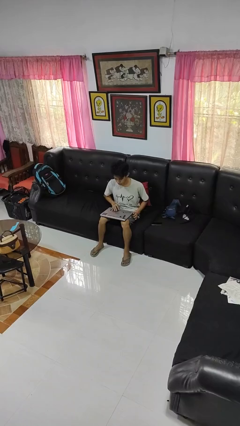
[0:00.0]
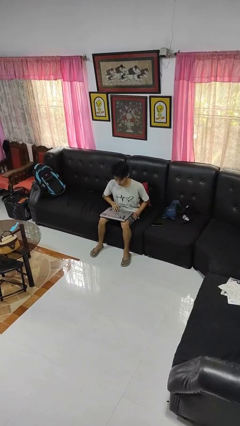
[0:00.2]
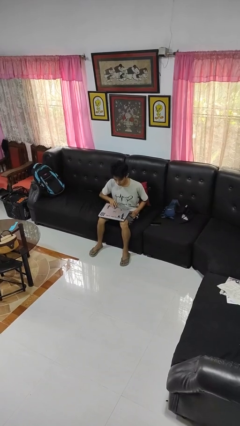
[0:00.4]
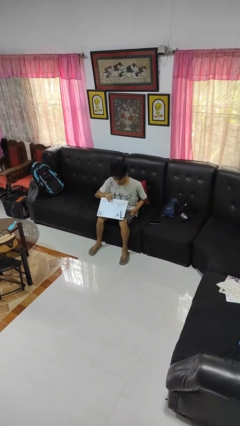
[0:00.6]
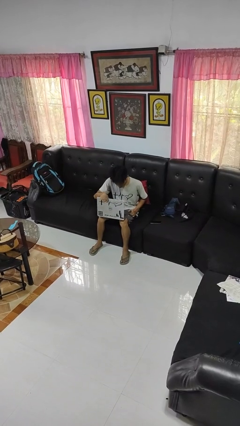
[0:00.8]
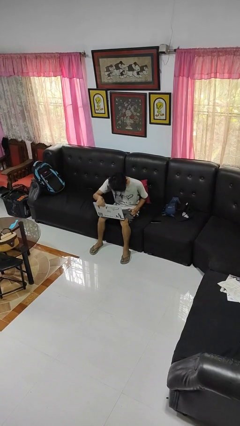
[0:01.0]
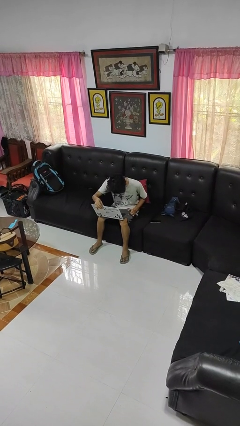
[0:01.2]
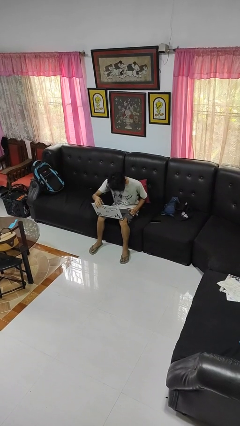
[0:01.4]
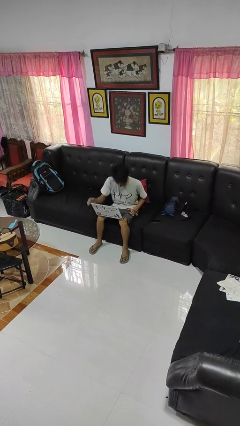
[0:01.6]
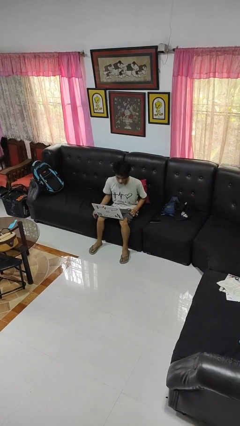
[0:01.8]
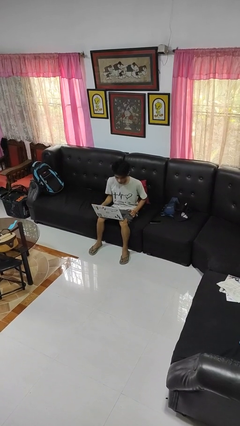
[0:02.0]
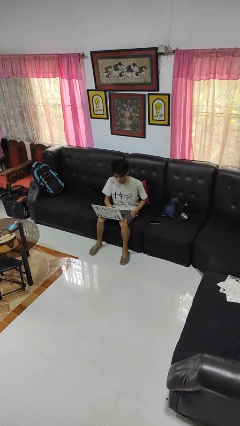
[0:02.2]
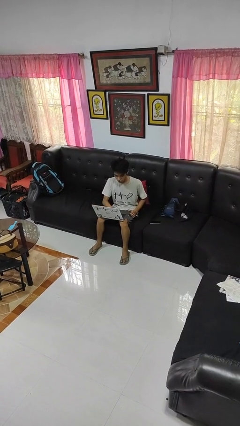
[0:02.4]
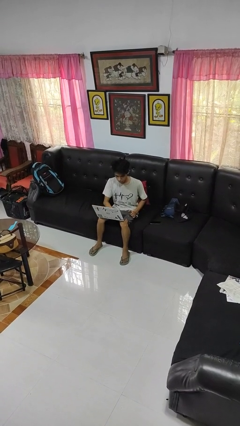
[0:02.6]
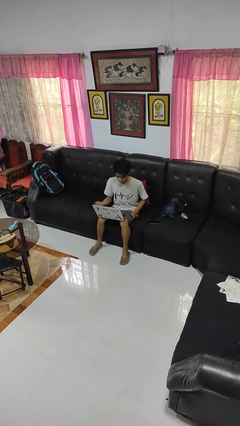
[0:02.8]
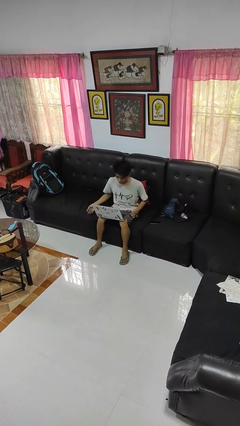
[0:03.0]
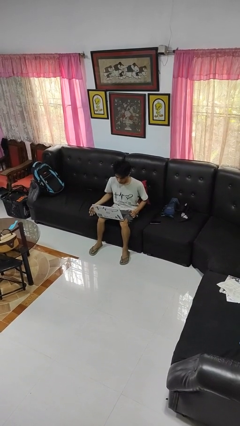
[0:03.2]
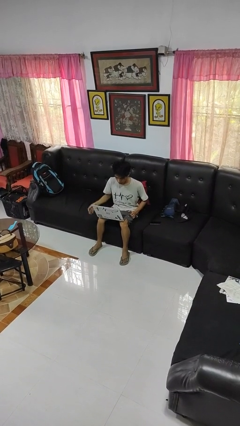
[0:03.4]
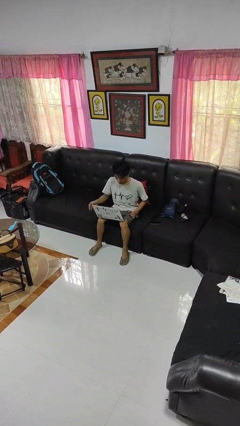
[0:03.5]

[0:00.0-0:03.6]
person opens laptop

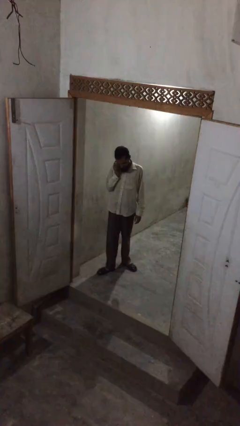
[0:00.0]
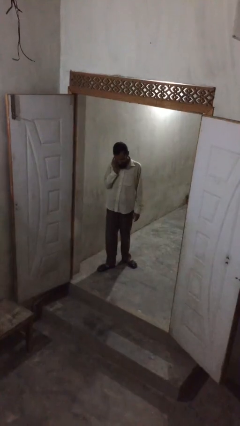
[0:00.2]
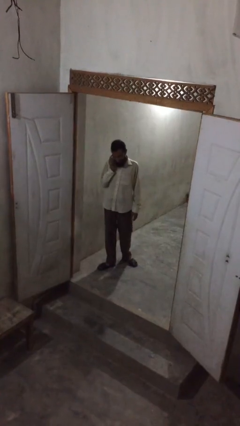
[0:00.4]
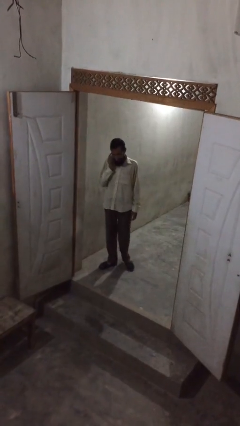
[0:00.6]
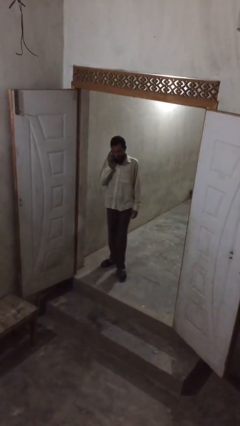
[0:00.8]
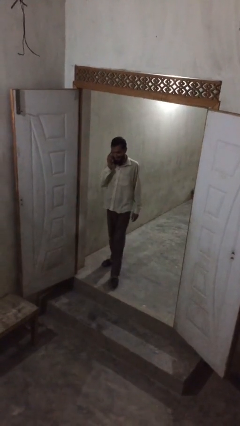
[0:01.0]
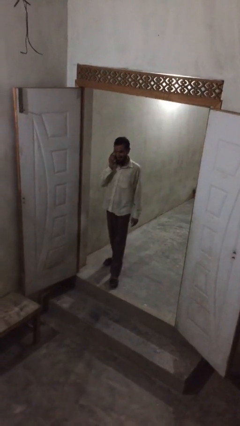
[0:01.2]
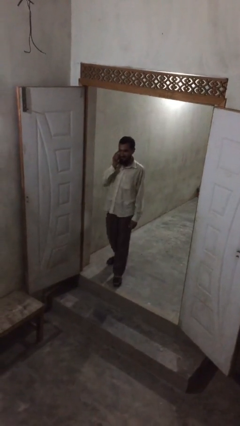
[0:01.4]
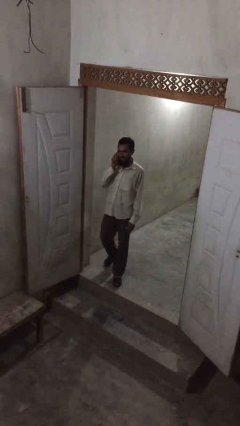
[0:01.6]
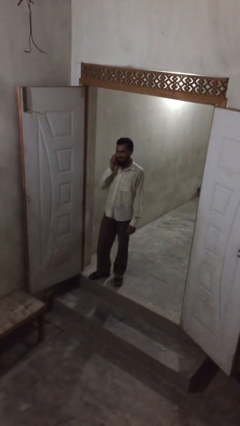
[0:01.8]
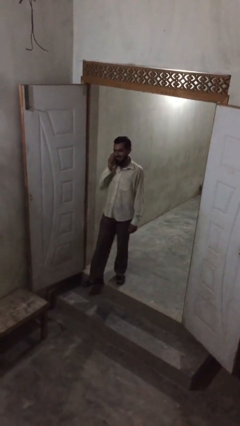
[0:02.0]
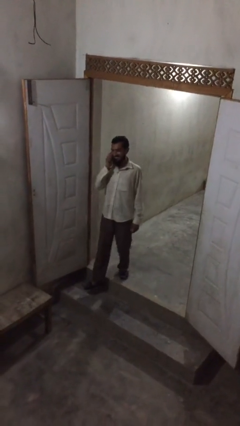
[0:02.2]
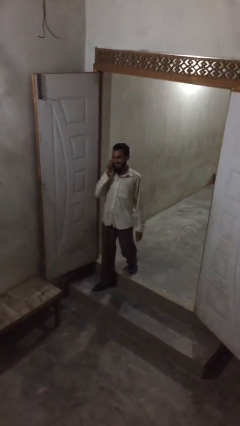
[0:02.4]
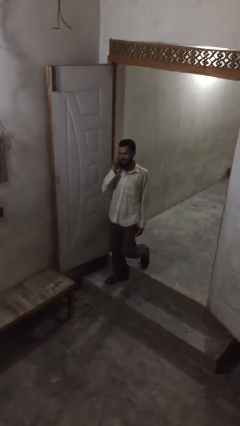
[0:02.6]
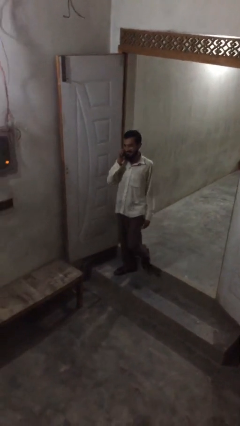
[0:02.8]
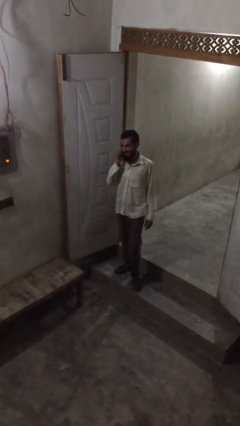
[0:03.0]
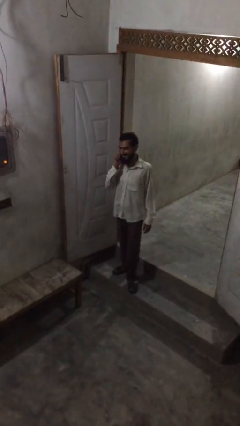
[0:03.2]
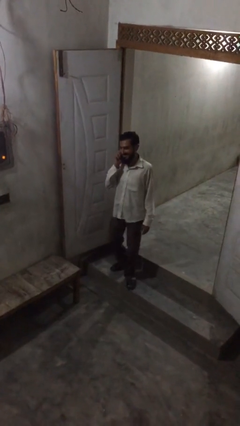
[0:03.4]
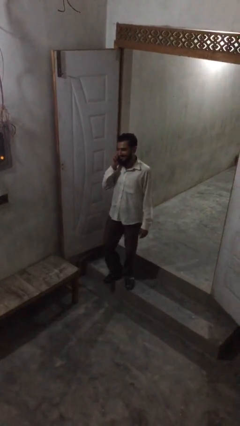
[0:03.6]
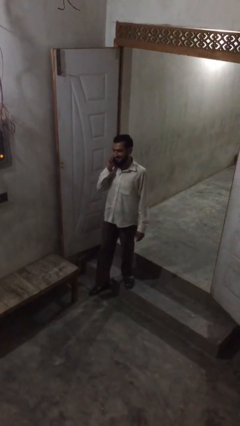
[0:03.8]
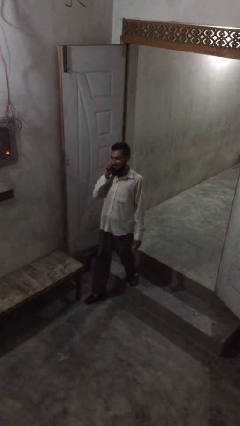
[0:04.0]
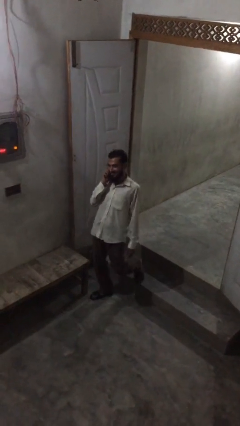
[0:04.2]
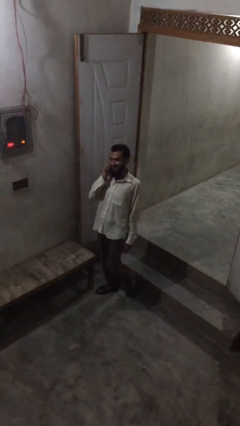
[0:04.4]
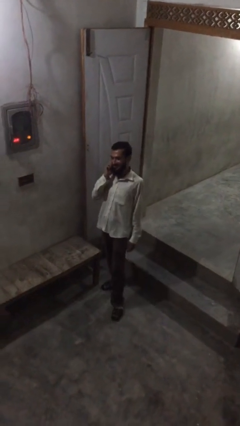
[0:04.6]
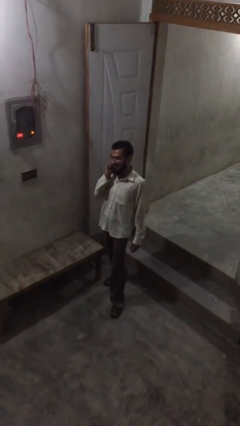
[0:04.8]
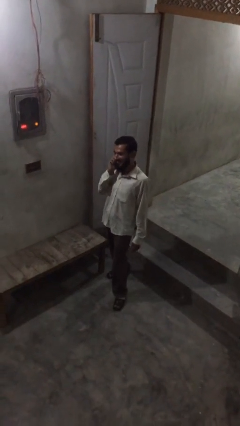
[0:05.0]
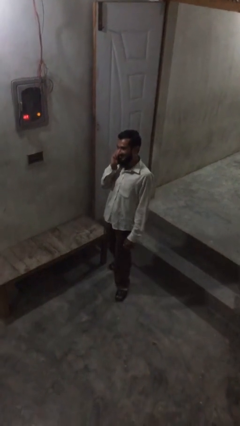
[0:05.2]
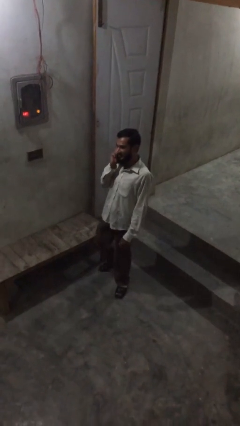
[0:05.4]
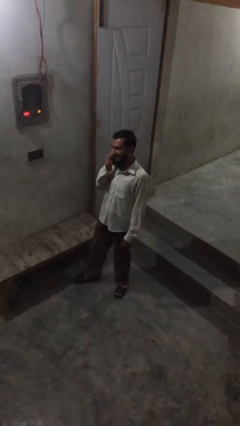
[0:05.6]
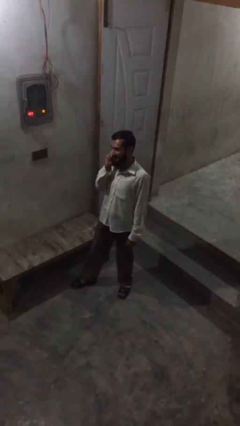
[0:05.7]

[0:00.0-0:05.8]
person enters scene through structure

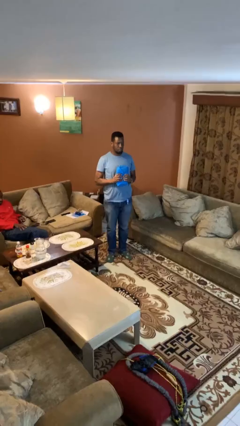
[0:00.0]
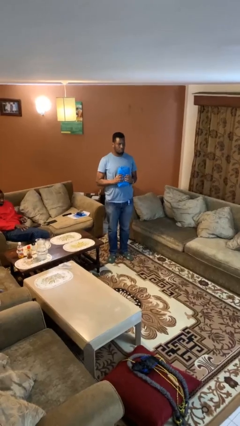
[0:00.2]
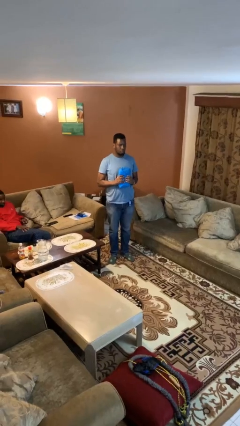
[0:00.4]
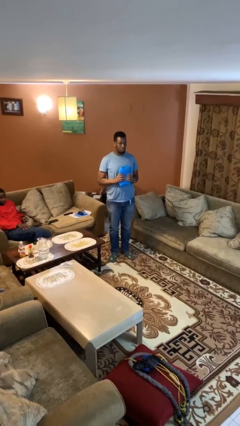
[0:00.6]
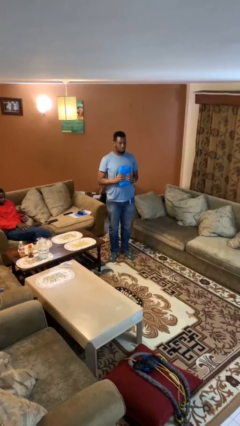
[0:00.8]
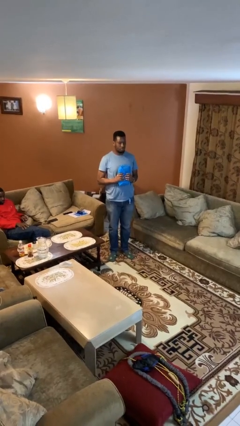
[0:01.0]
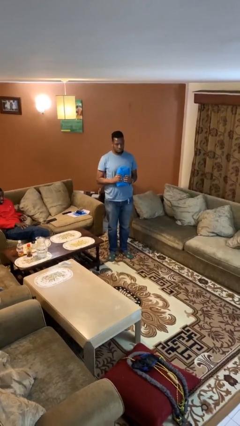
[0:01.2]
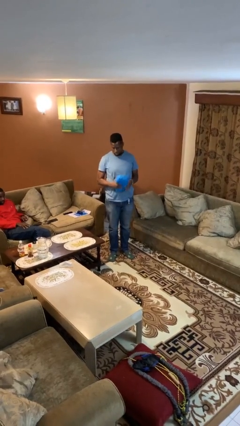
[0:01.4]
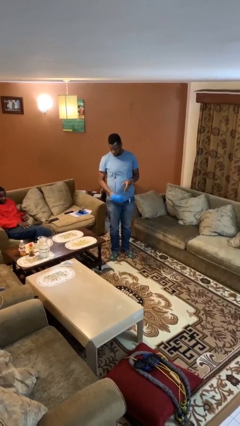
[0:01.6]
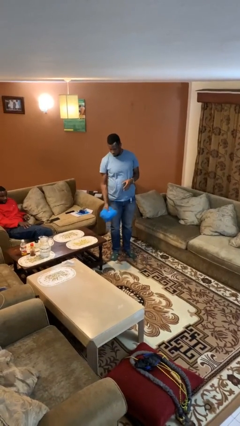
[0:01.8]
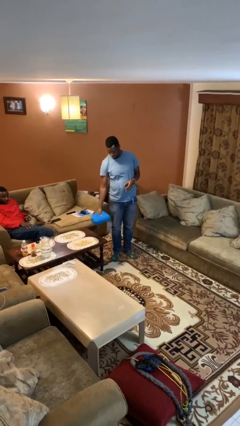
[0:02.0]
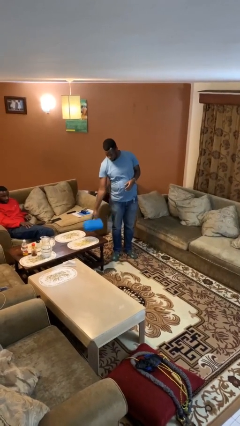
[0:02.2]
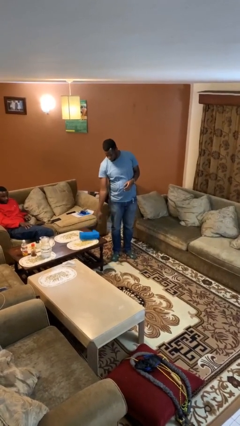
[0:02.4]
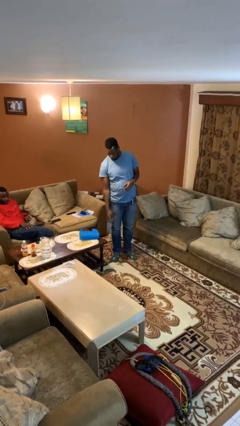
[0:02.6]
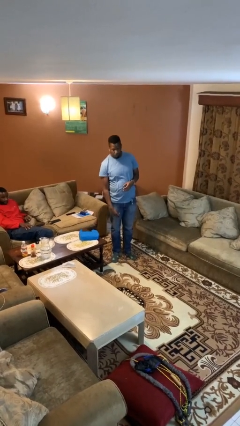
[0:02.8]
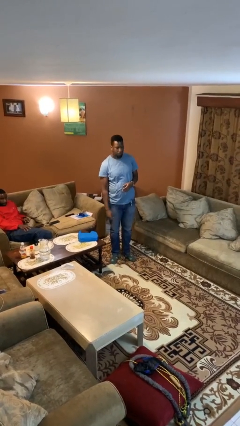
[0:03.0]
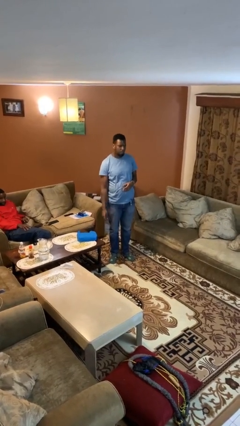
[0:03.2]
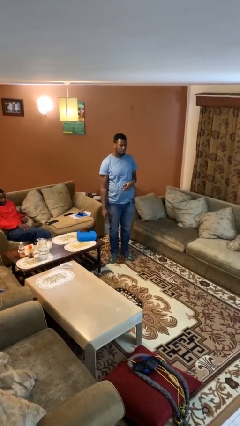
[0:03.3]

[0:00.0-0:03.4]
person puts down object on table

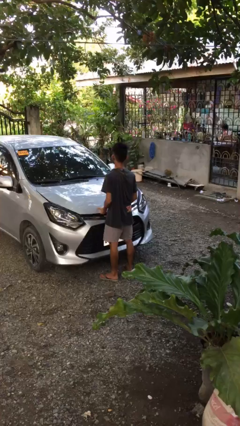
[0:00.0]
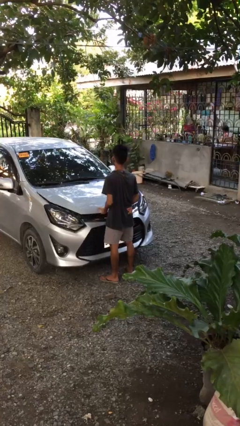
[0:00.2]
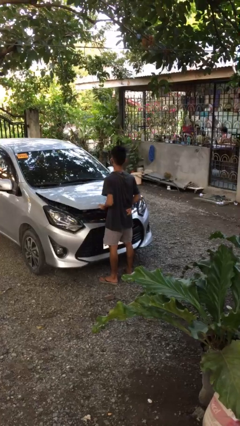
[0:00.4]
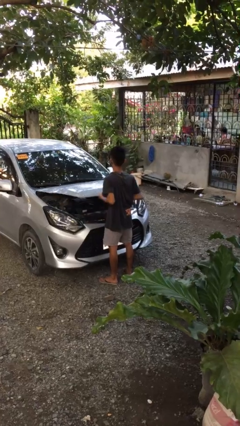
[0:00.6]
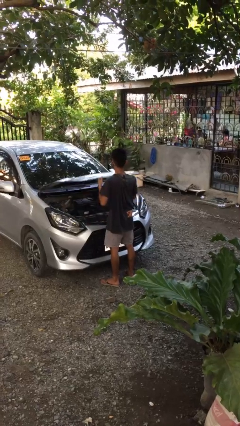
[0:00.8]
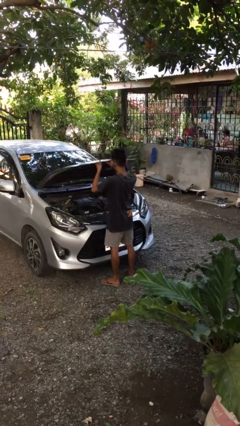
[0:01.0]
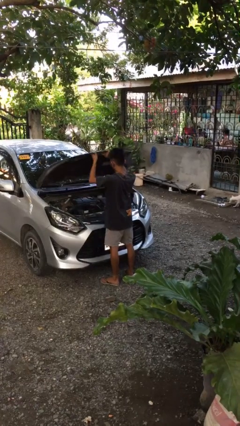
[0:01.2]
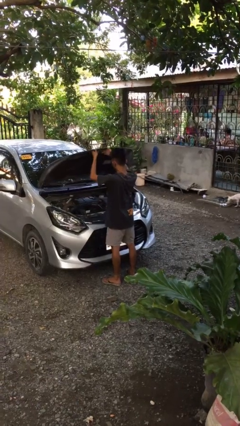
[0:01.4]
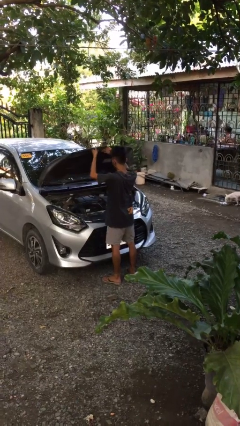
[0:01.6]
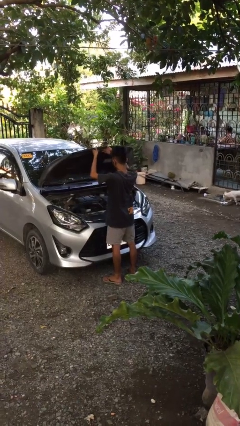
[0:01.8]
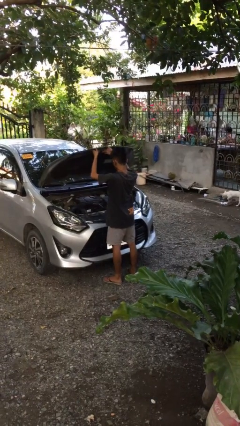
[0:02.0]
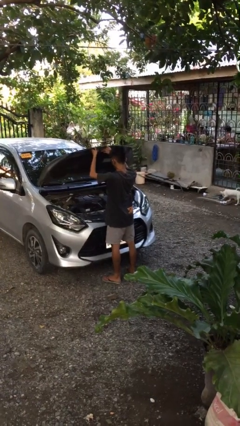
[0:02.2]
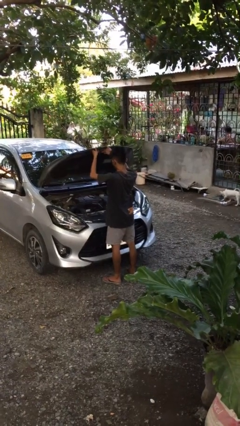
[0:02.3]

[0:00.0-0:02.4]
person opens car hood

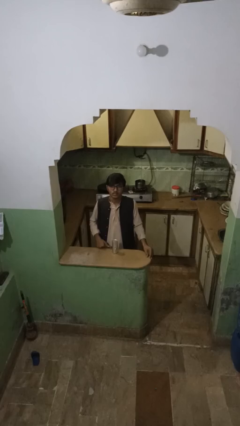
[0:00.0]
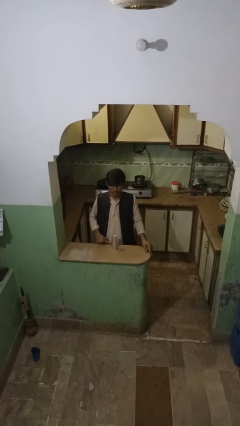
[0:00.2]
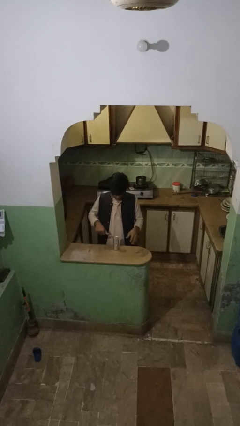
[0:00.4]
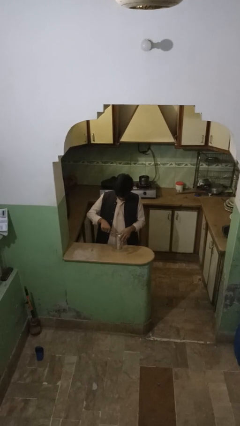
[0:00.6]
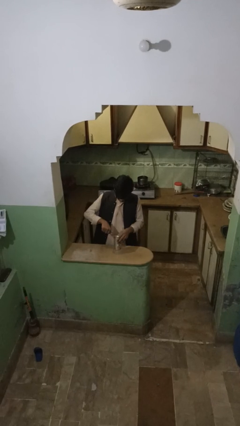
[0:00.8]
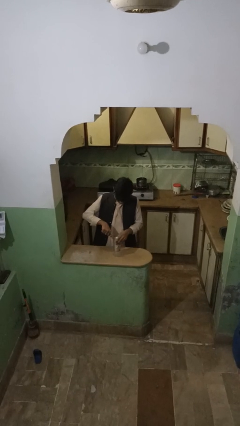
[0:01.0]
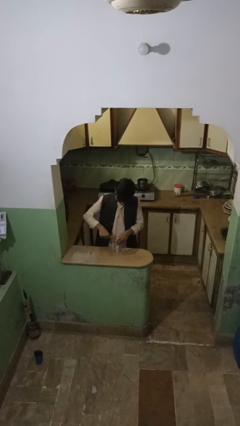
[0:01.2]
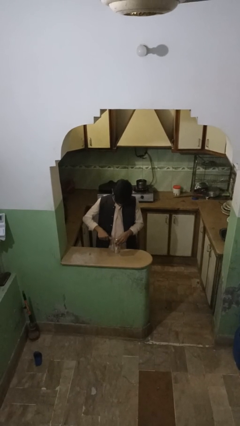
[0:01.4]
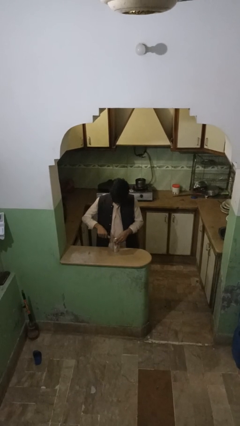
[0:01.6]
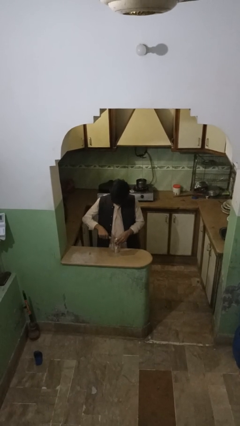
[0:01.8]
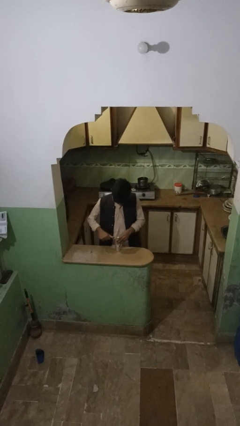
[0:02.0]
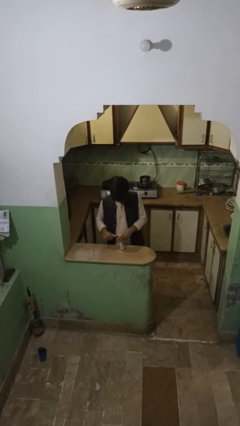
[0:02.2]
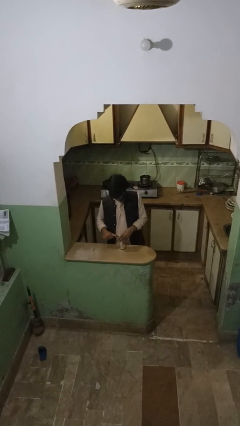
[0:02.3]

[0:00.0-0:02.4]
person opens can with can opener
